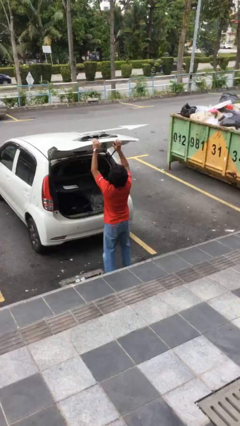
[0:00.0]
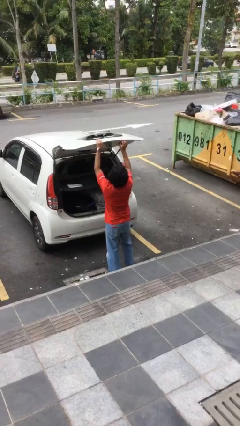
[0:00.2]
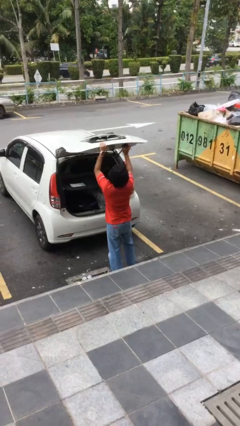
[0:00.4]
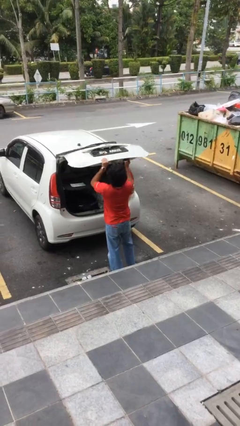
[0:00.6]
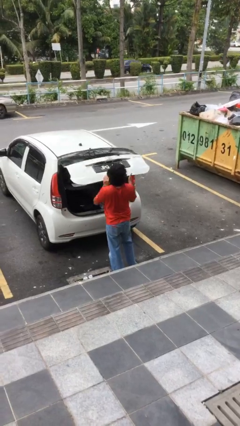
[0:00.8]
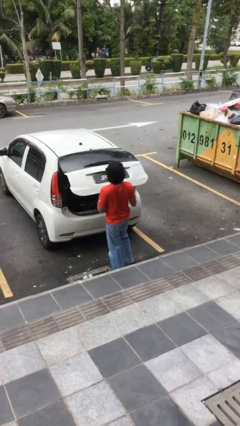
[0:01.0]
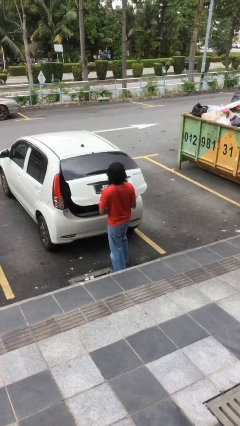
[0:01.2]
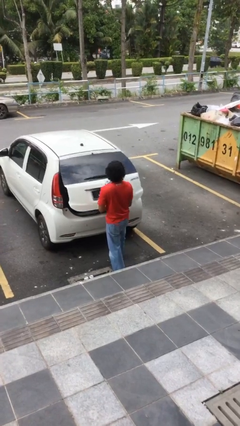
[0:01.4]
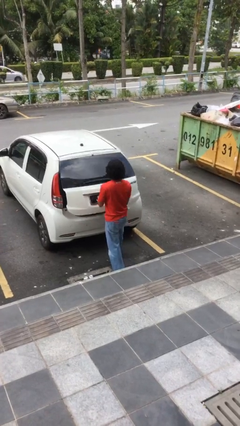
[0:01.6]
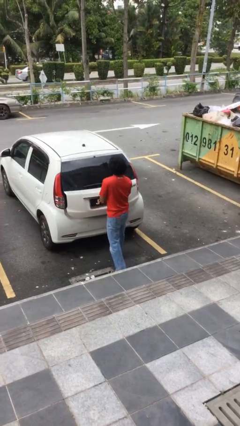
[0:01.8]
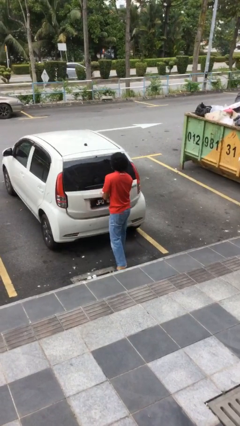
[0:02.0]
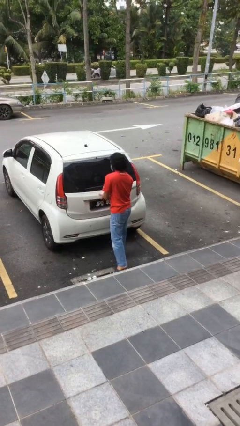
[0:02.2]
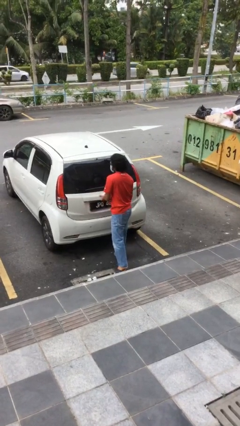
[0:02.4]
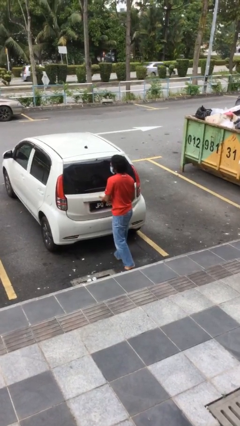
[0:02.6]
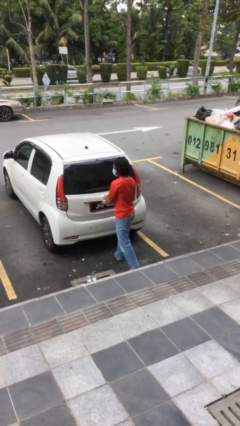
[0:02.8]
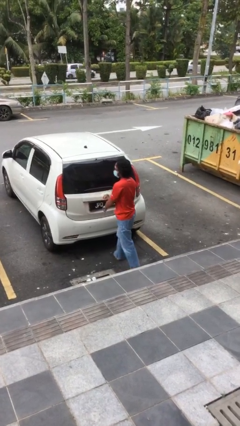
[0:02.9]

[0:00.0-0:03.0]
person closes car trunk

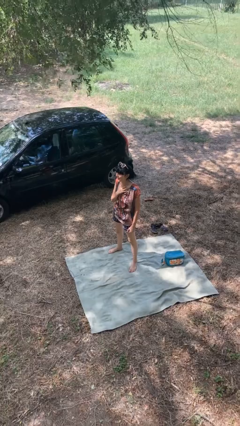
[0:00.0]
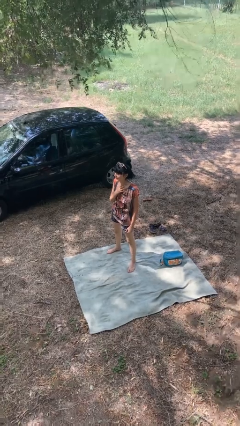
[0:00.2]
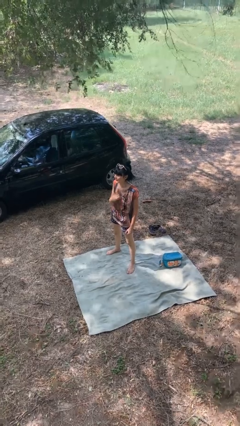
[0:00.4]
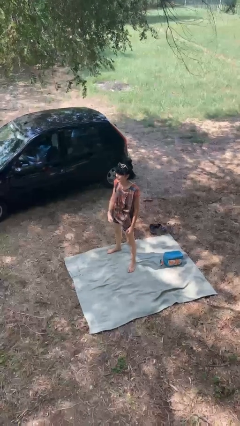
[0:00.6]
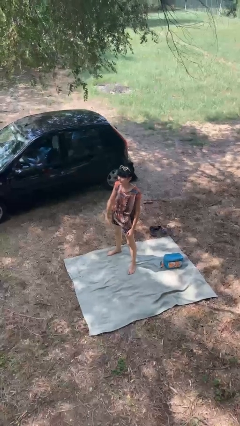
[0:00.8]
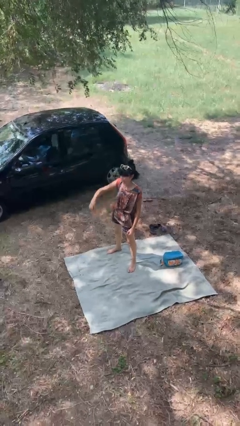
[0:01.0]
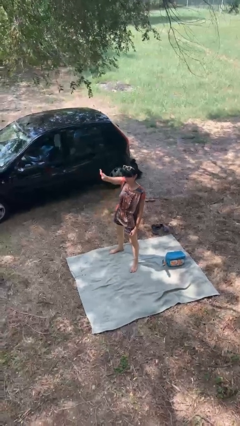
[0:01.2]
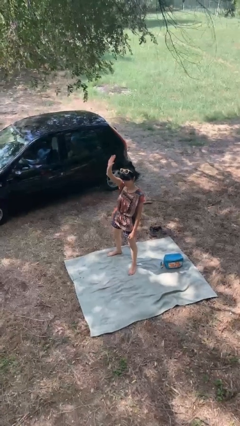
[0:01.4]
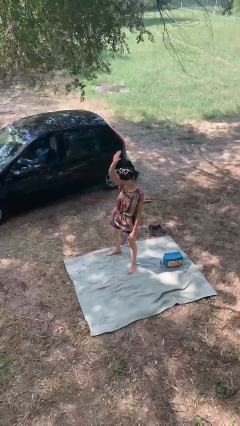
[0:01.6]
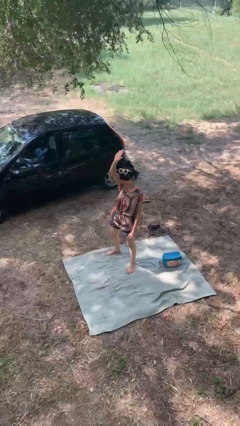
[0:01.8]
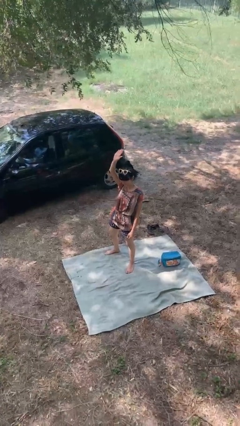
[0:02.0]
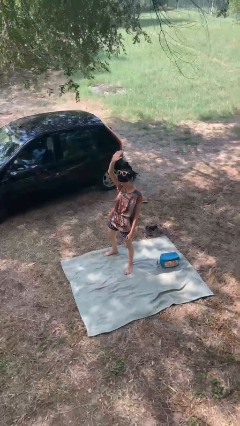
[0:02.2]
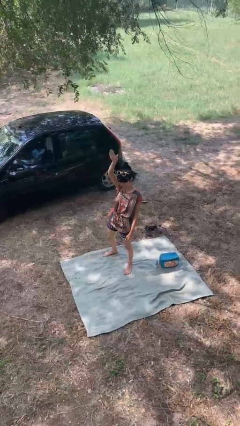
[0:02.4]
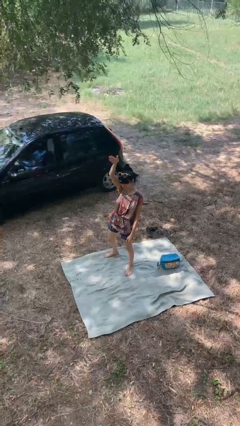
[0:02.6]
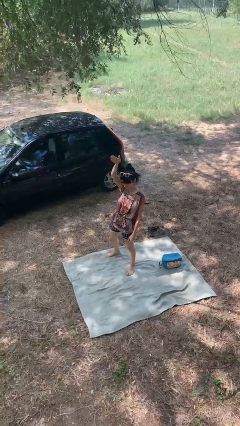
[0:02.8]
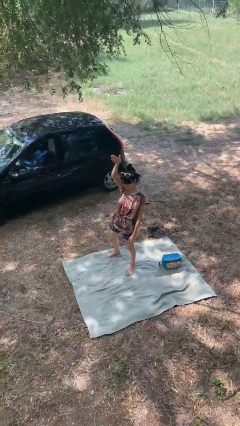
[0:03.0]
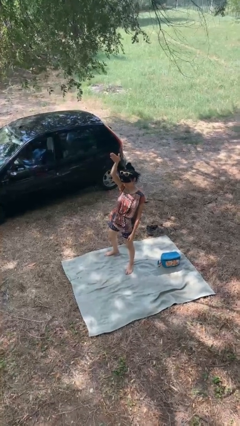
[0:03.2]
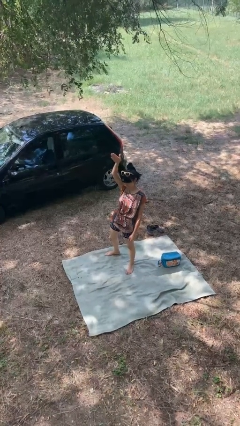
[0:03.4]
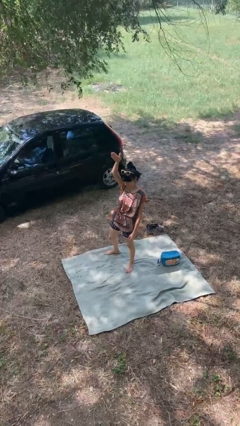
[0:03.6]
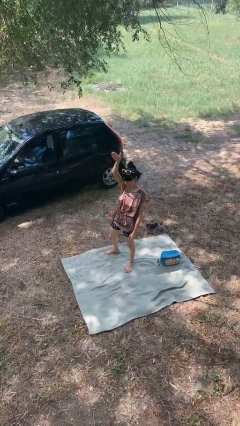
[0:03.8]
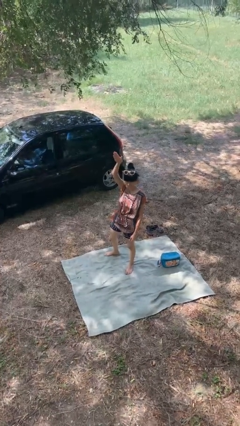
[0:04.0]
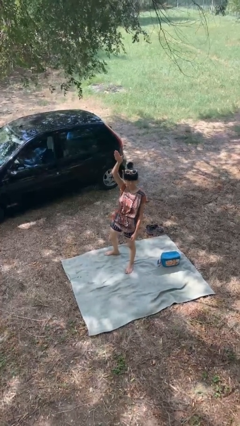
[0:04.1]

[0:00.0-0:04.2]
person gestures raise hand

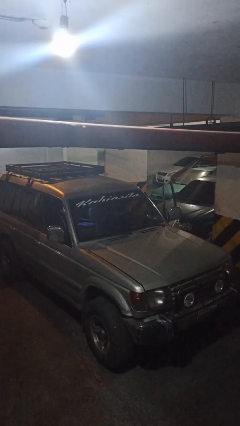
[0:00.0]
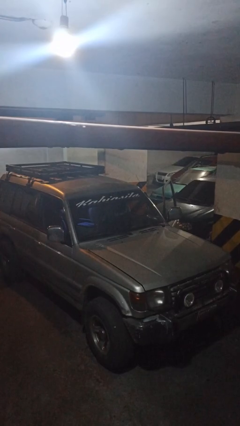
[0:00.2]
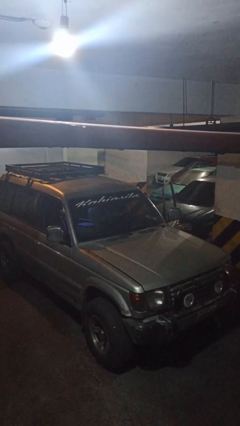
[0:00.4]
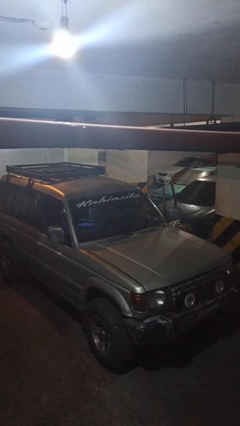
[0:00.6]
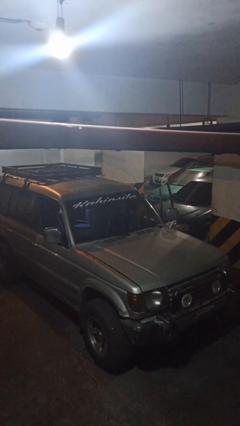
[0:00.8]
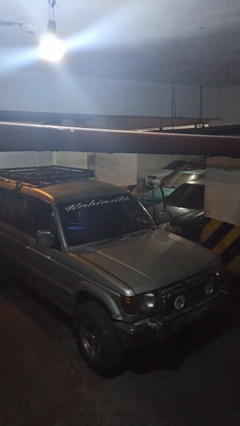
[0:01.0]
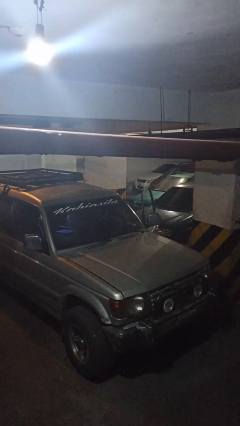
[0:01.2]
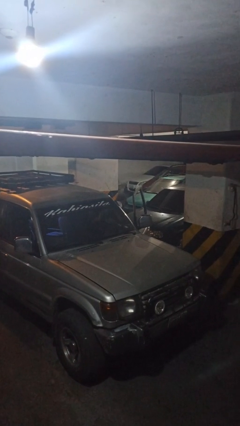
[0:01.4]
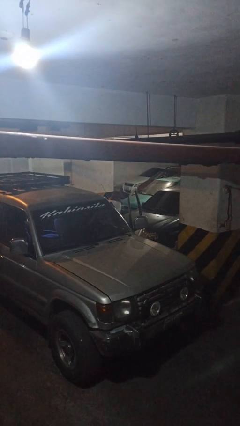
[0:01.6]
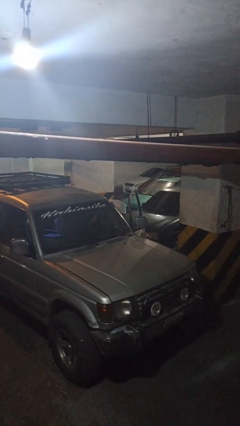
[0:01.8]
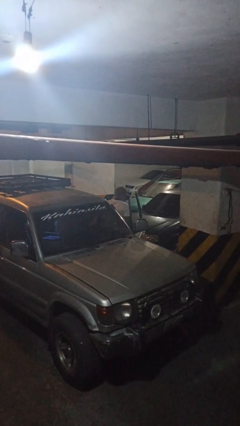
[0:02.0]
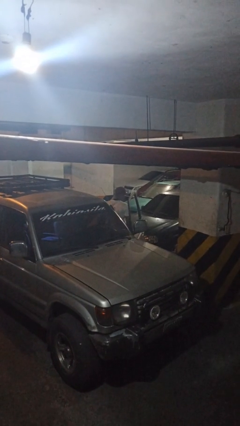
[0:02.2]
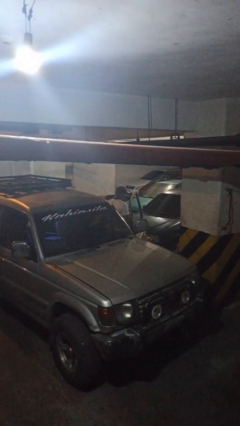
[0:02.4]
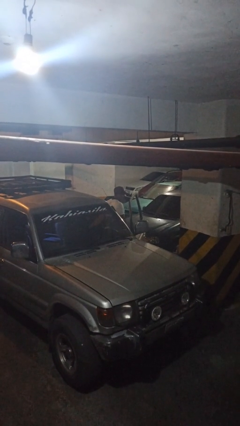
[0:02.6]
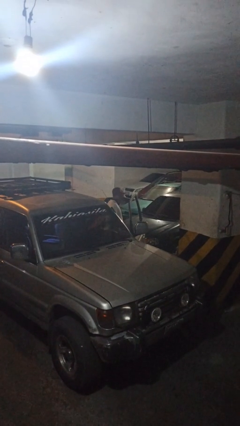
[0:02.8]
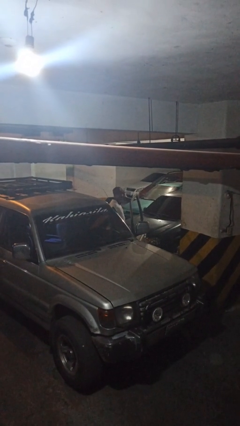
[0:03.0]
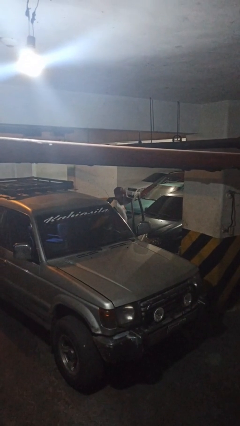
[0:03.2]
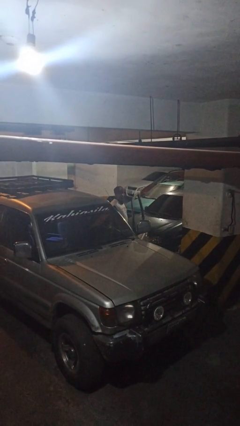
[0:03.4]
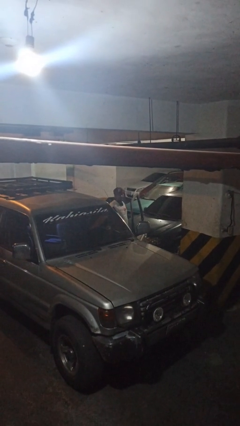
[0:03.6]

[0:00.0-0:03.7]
person exits car

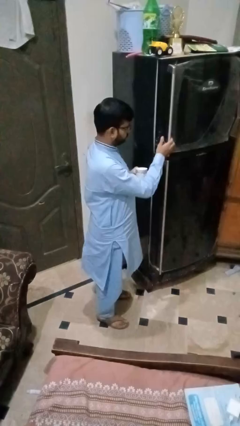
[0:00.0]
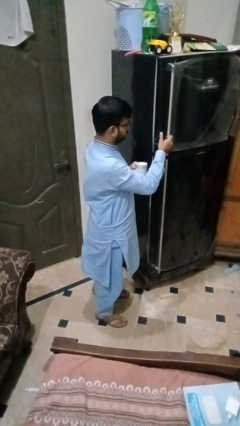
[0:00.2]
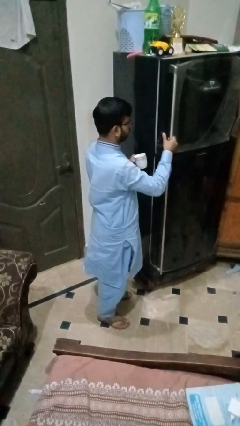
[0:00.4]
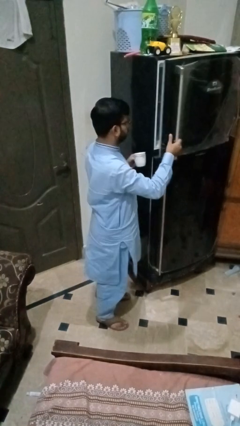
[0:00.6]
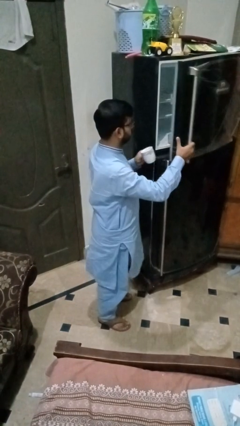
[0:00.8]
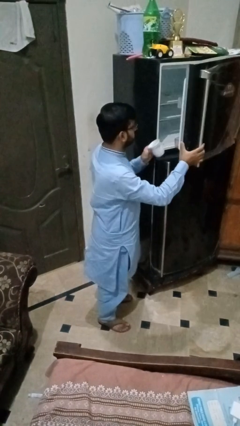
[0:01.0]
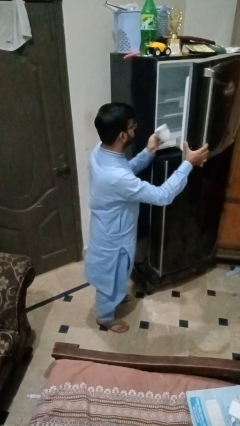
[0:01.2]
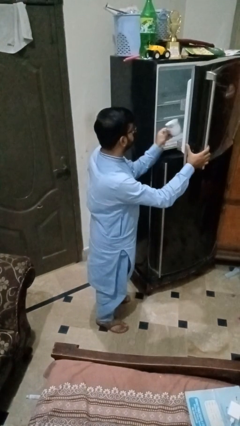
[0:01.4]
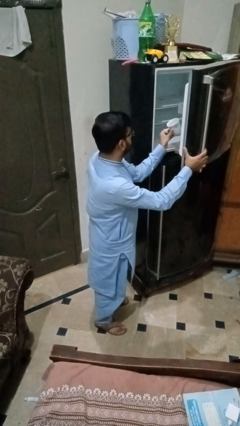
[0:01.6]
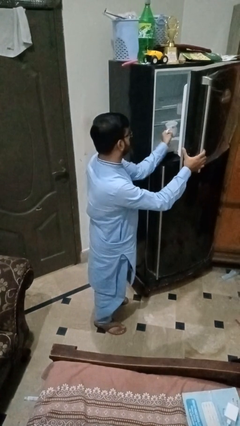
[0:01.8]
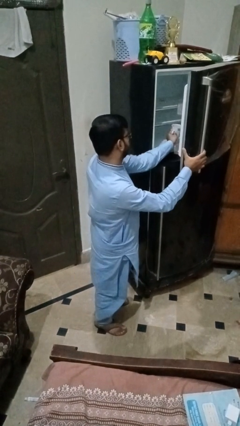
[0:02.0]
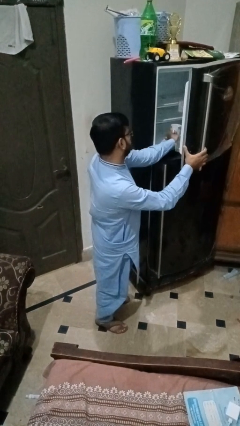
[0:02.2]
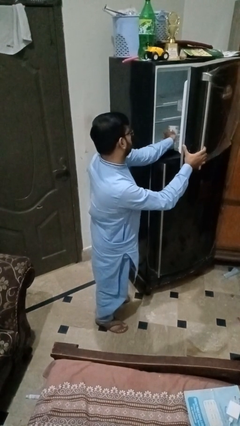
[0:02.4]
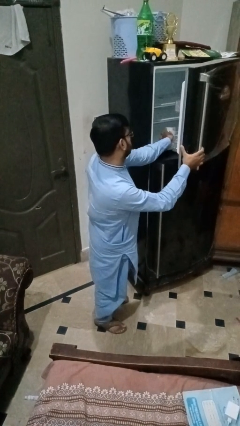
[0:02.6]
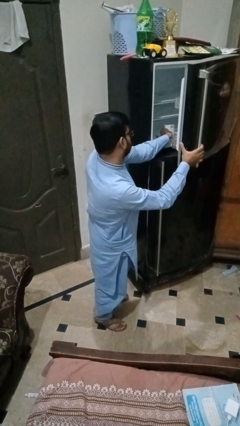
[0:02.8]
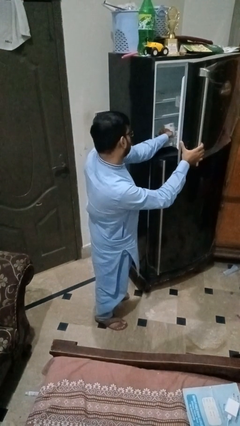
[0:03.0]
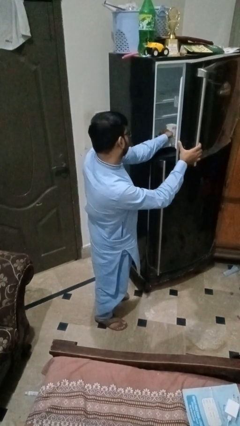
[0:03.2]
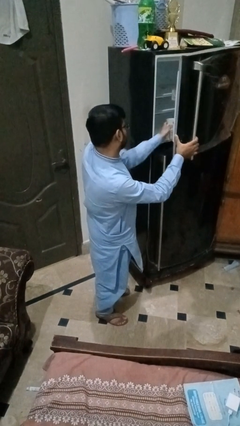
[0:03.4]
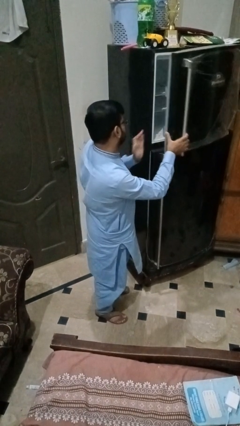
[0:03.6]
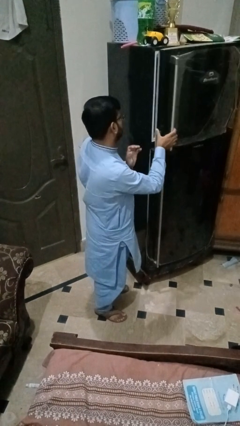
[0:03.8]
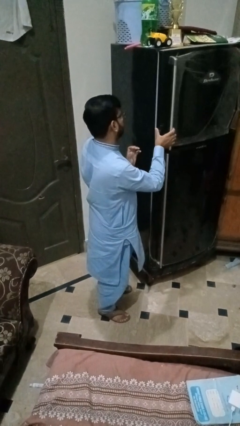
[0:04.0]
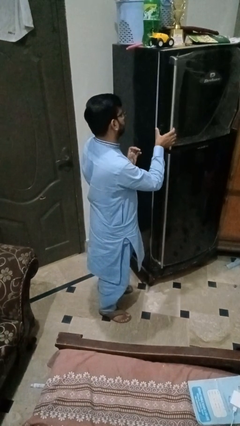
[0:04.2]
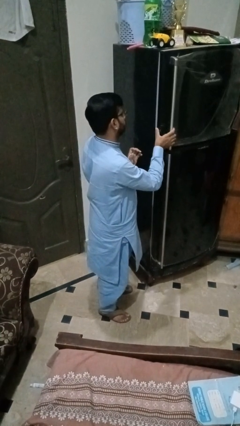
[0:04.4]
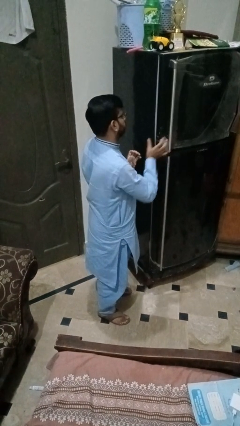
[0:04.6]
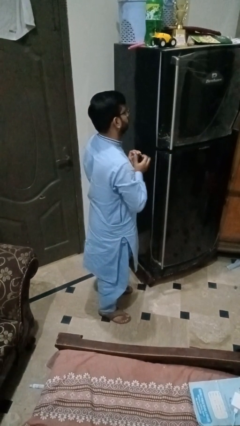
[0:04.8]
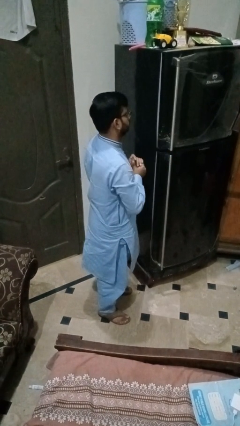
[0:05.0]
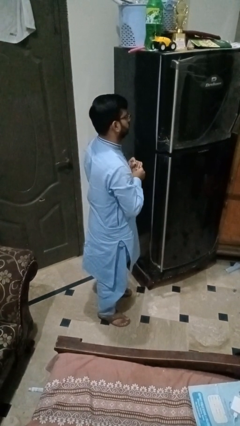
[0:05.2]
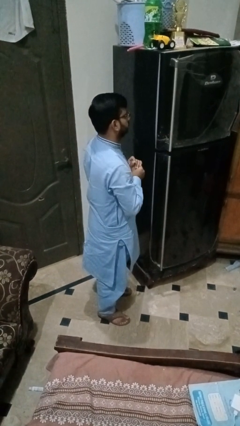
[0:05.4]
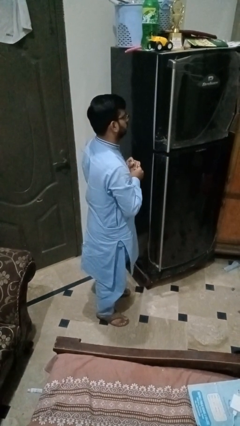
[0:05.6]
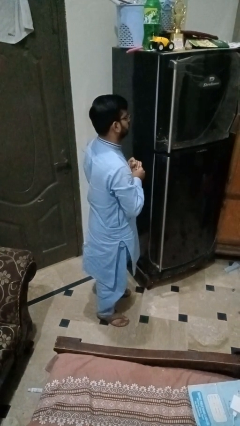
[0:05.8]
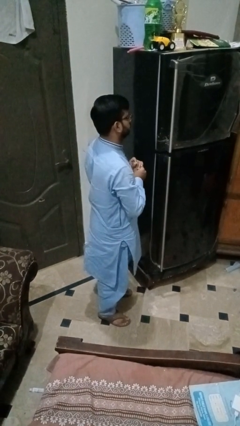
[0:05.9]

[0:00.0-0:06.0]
person puts object into refrigerator

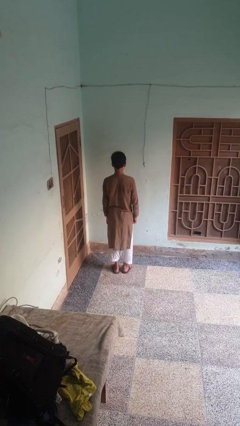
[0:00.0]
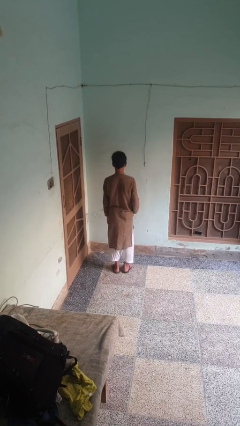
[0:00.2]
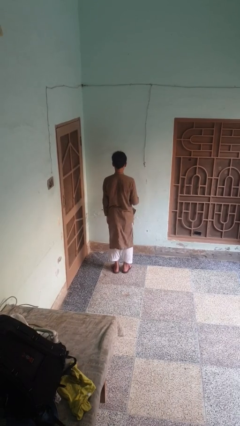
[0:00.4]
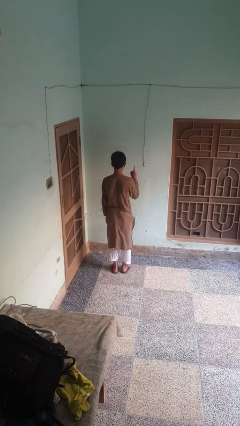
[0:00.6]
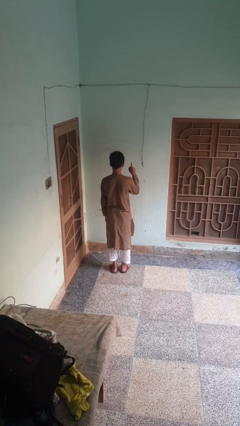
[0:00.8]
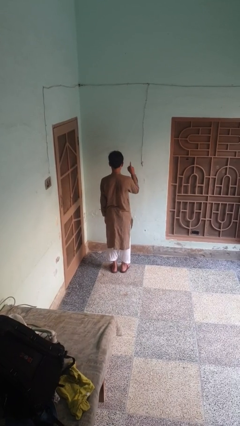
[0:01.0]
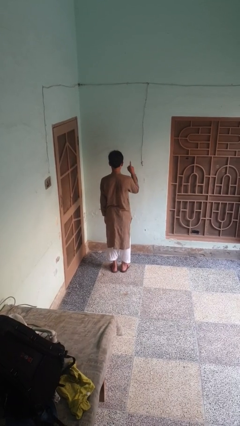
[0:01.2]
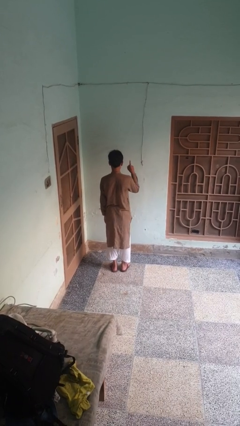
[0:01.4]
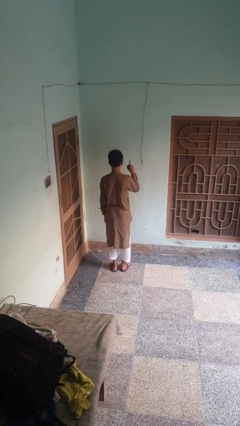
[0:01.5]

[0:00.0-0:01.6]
person gestures number one
